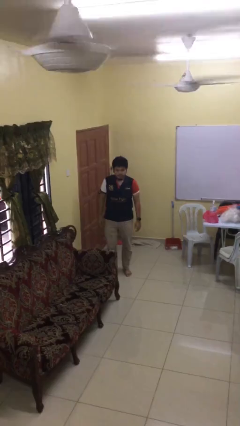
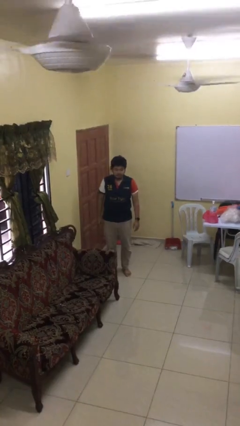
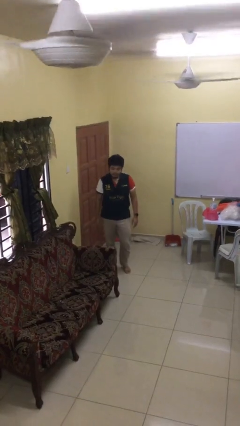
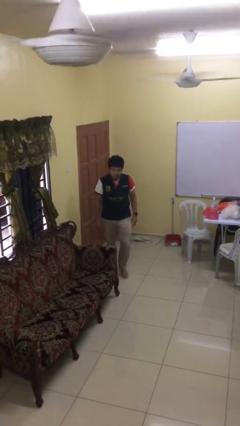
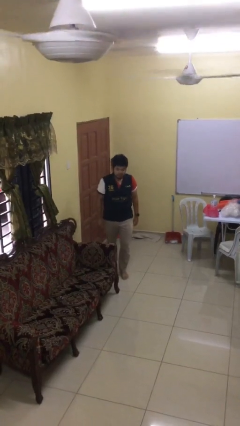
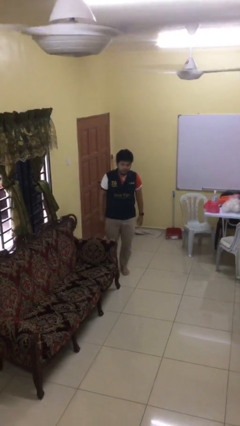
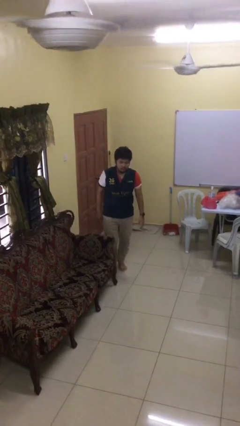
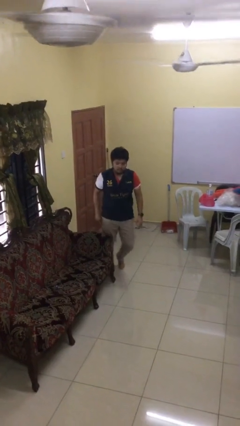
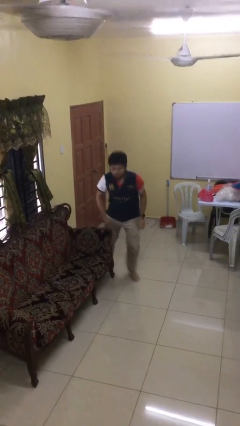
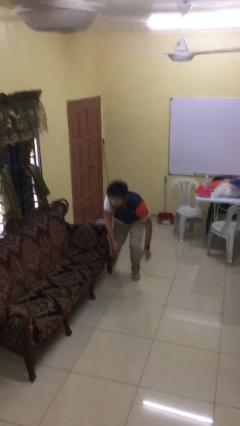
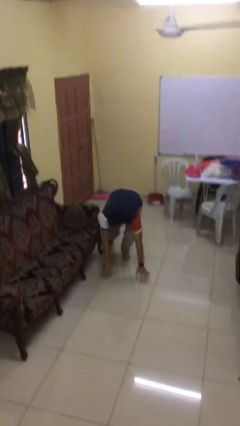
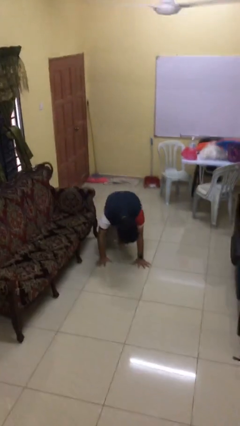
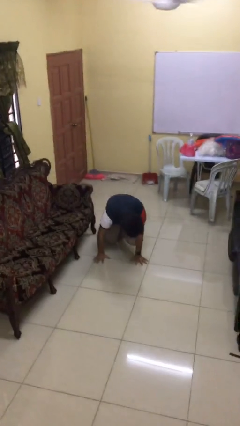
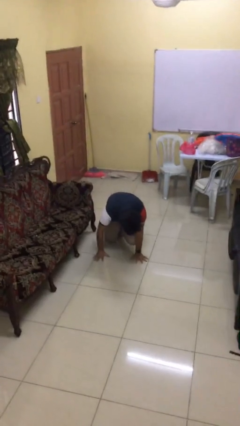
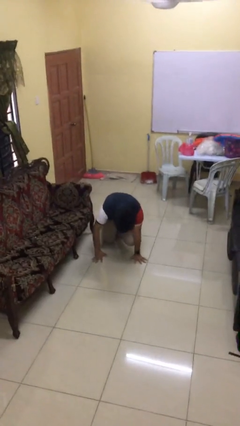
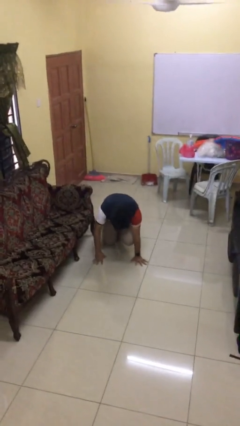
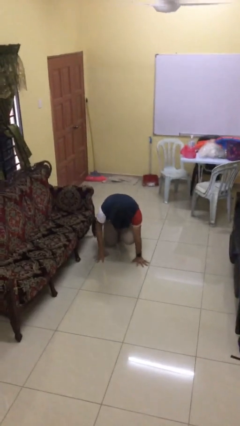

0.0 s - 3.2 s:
person trips on object on floor

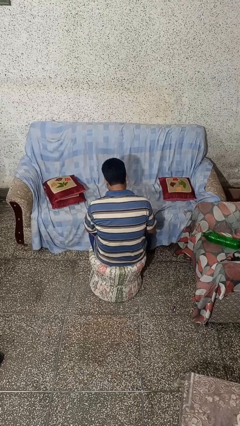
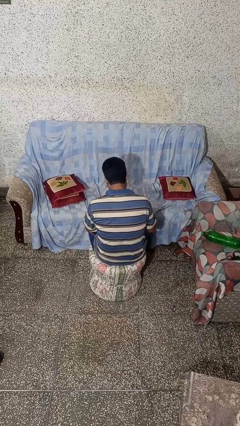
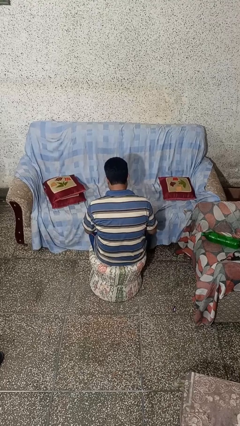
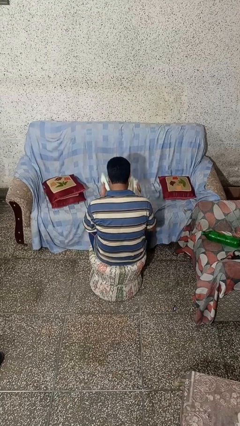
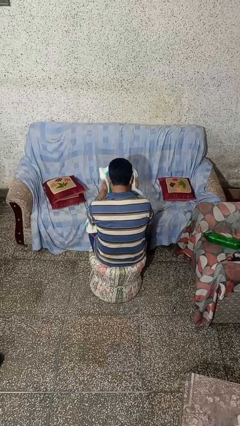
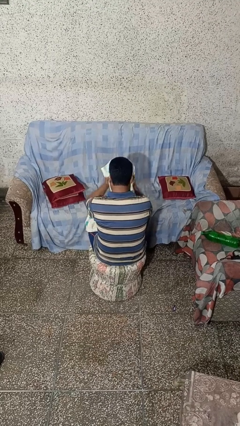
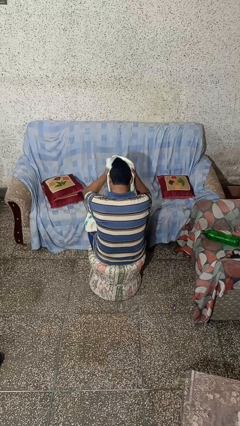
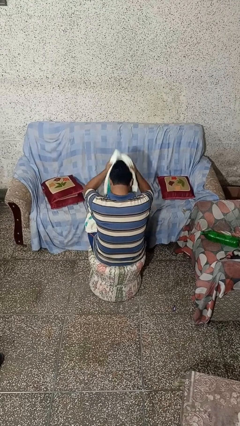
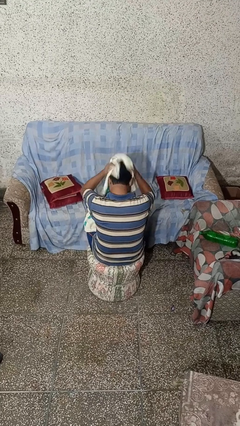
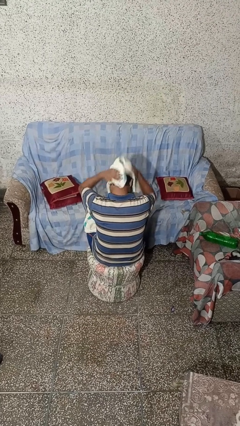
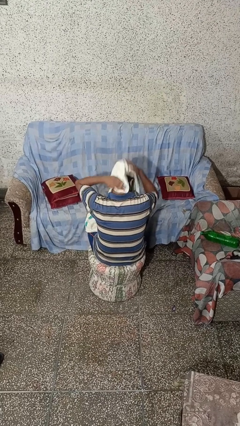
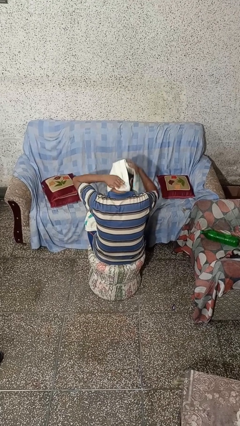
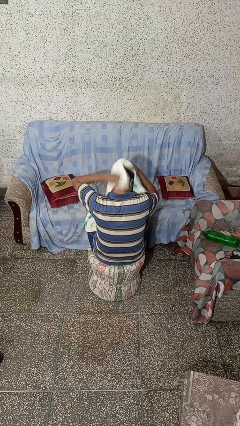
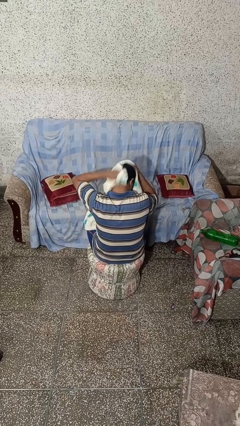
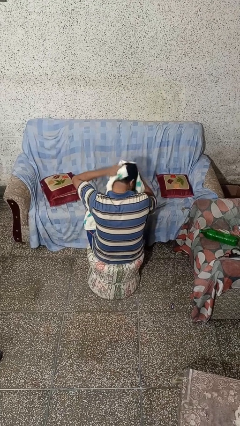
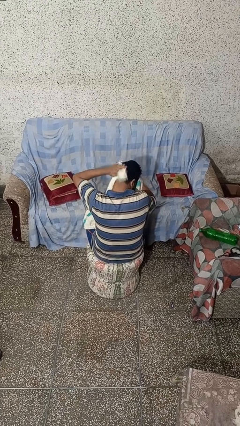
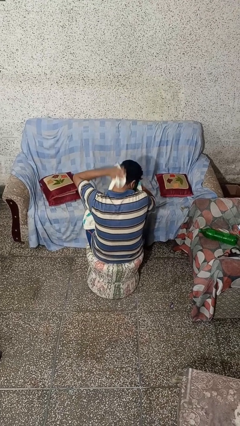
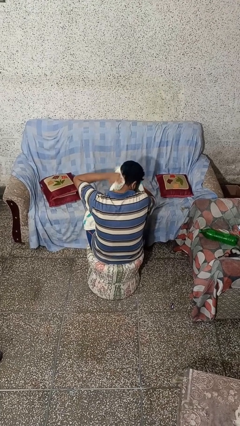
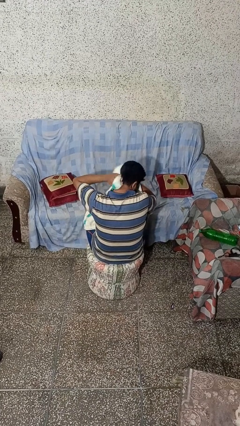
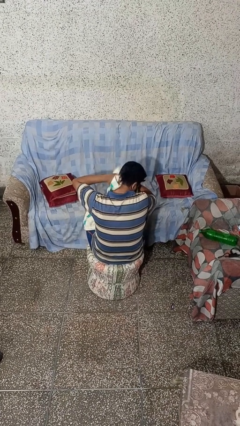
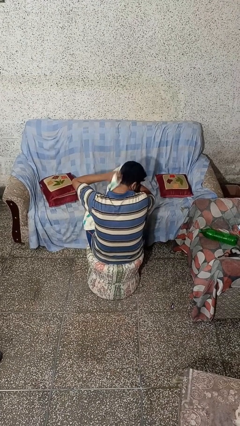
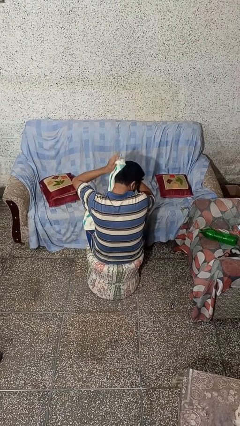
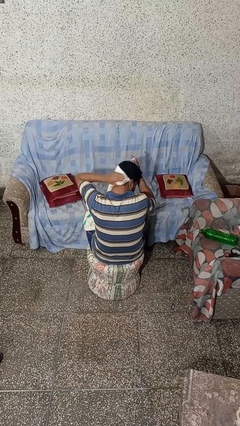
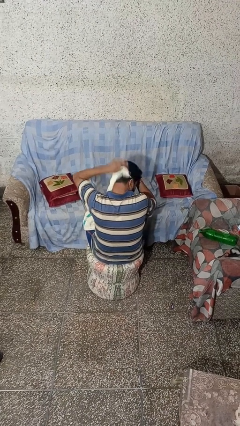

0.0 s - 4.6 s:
person dries hair with towel

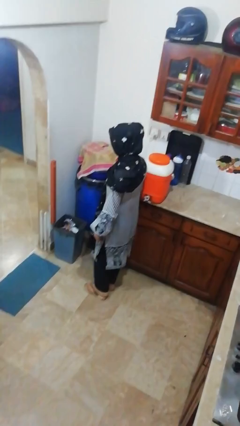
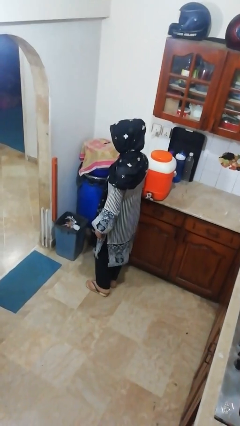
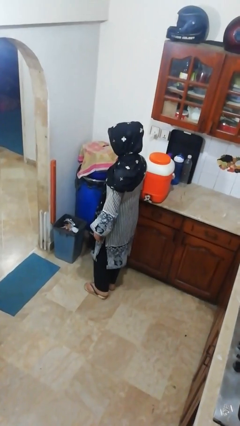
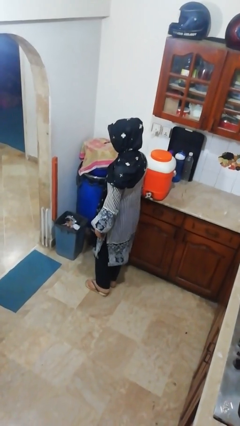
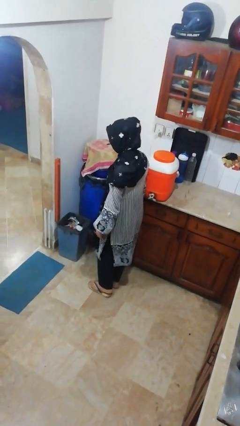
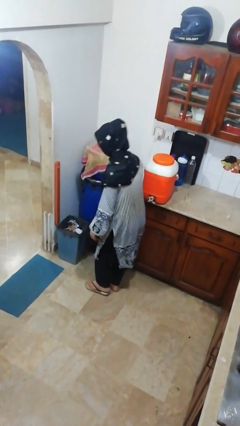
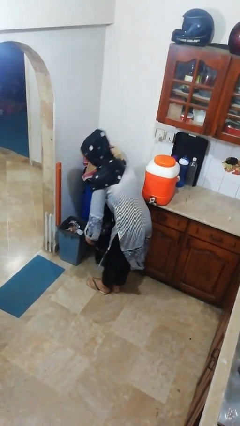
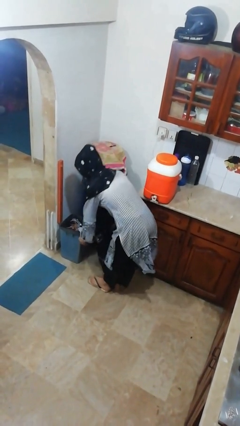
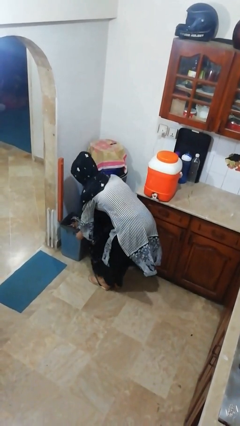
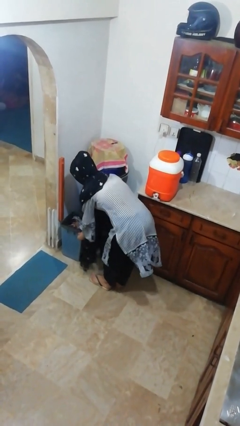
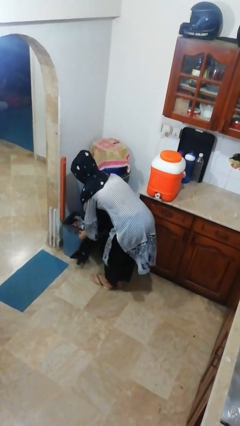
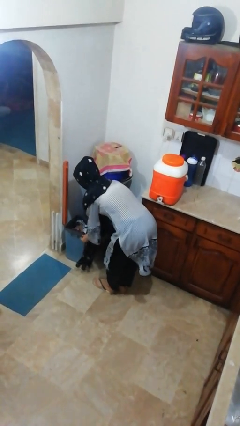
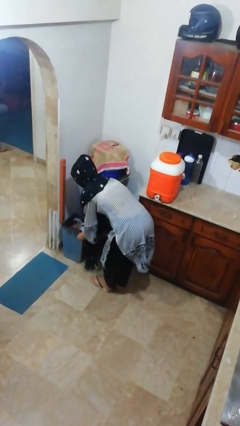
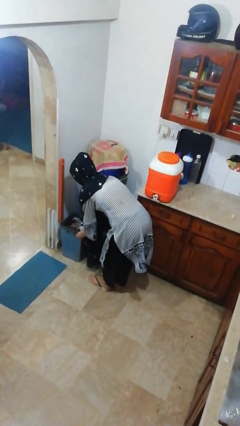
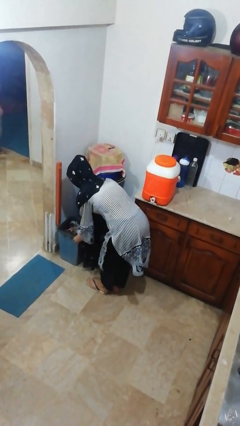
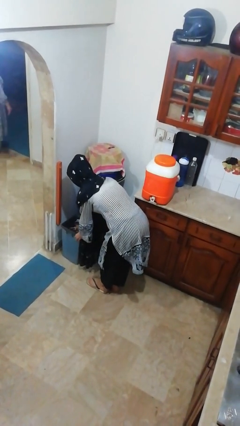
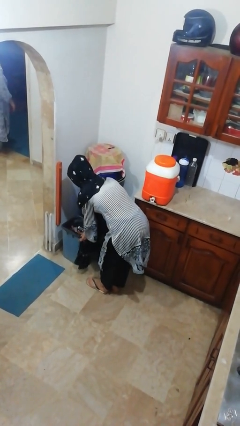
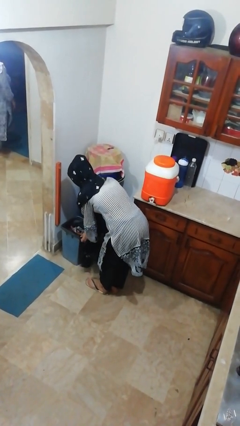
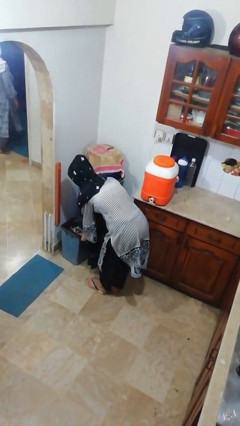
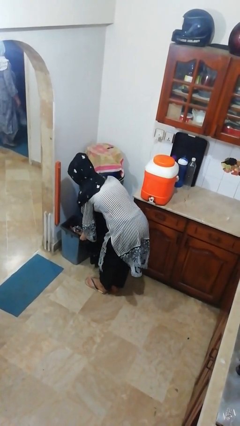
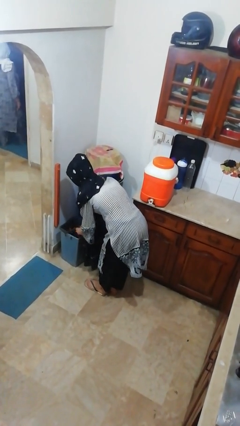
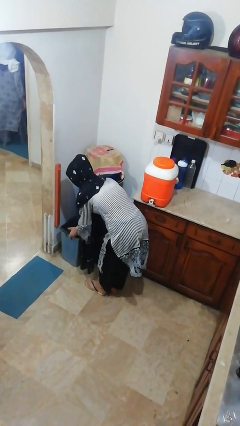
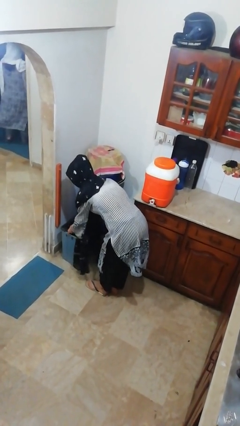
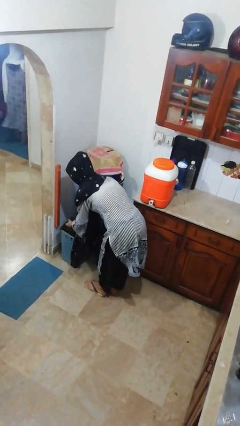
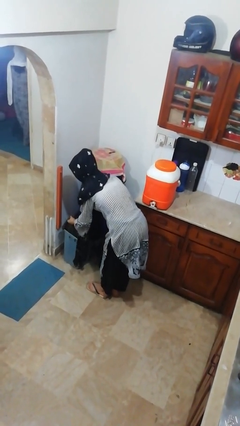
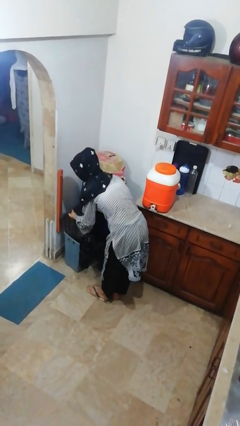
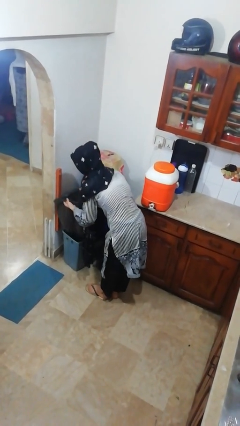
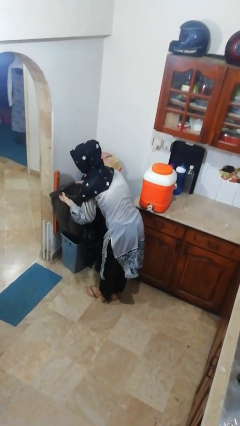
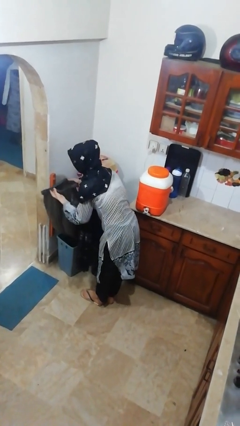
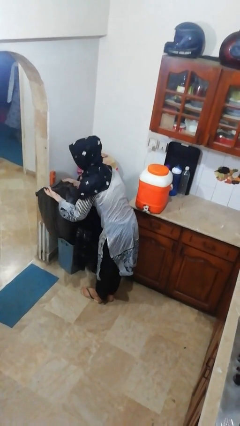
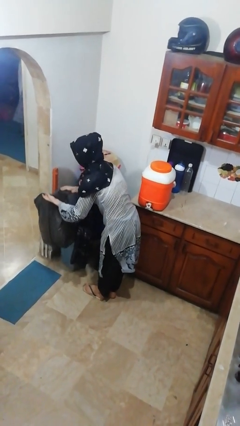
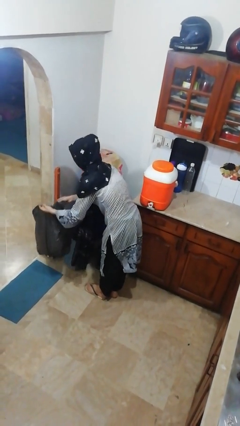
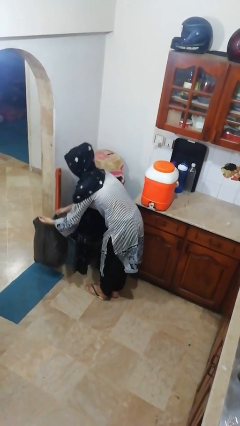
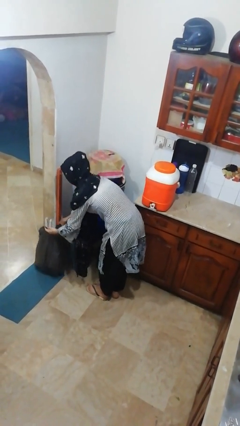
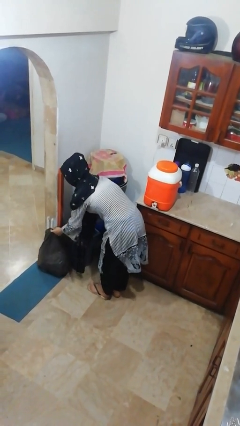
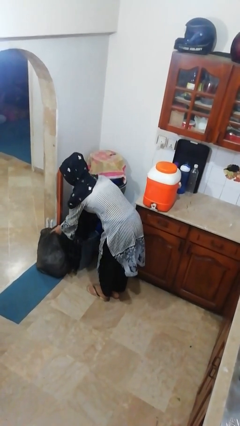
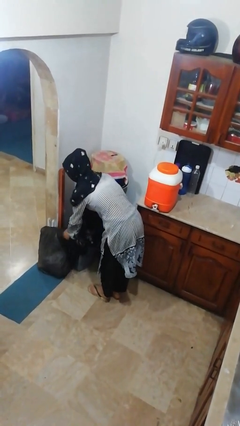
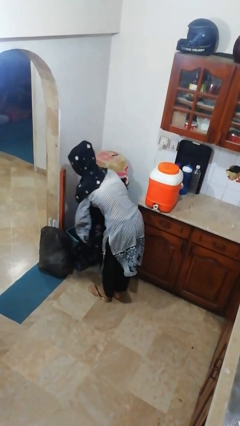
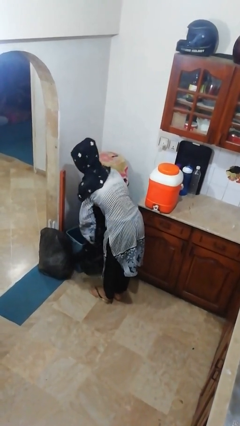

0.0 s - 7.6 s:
person removes trashbag from trashcan

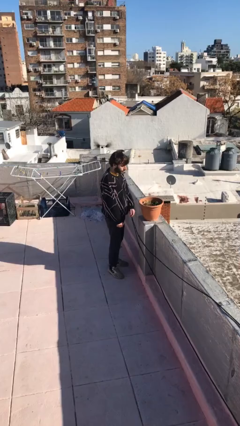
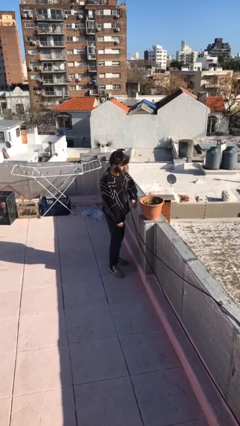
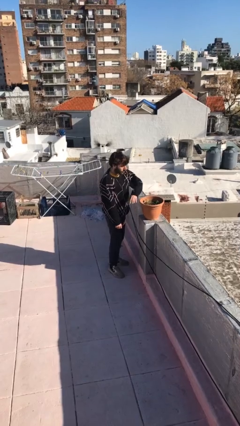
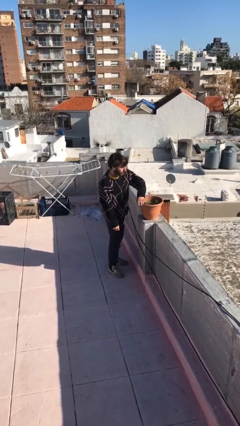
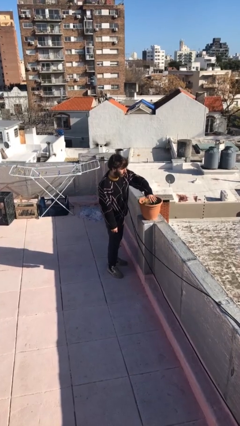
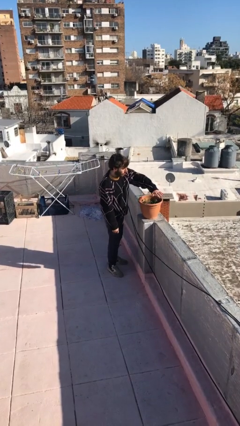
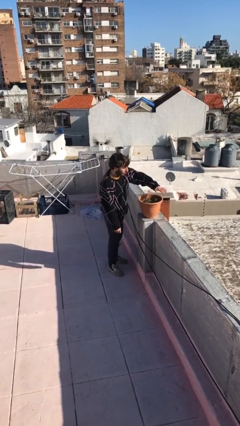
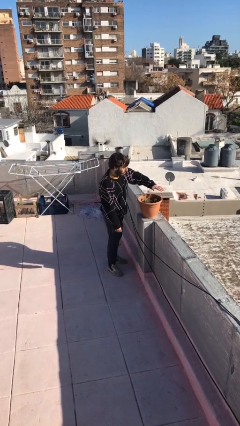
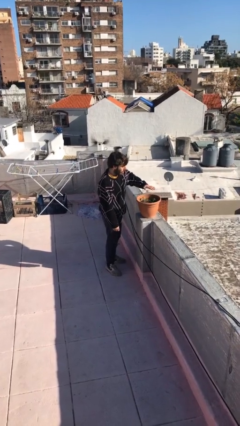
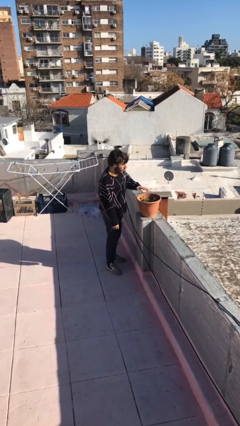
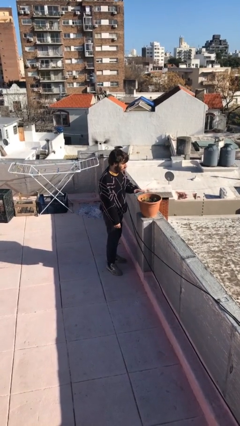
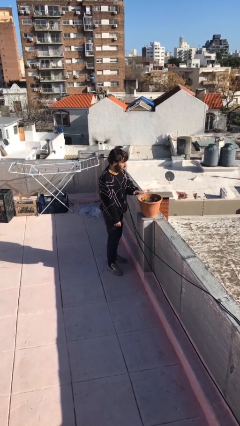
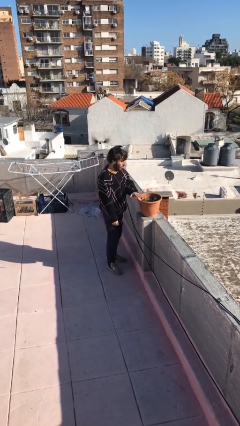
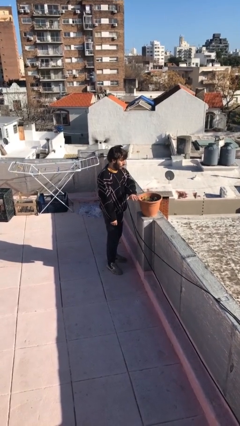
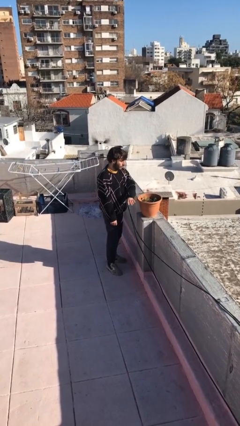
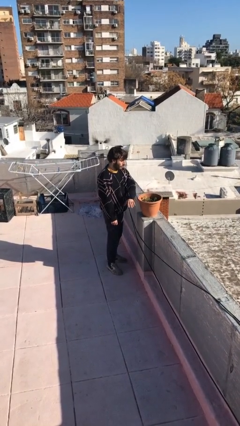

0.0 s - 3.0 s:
person waves hand over object
